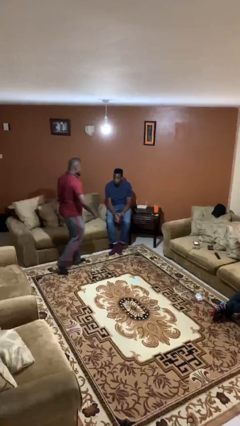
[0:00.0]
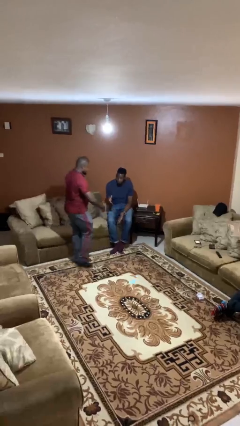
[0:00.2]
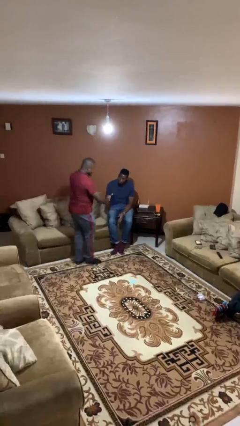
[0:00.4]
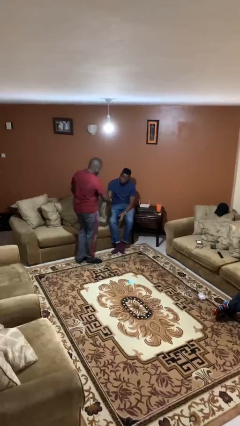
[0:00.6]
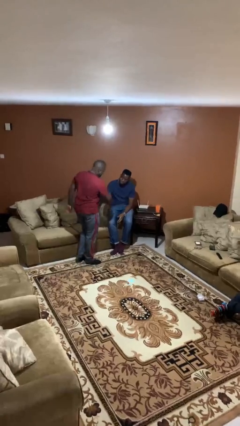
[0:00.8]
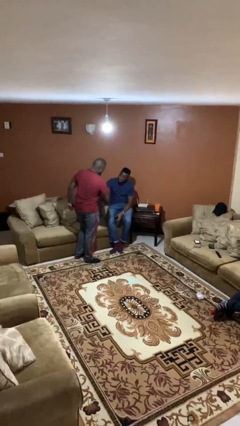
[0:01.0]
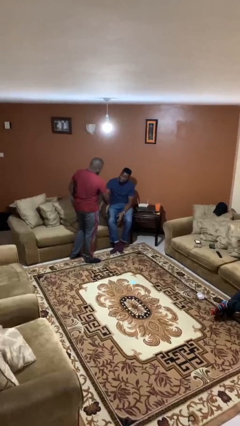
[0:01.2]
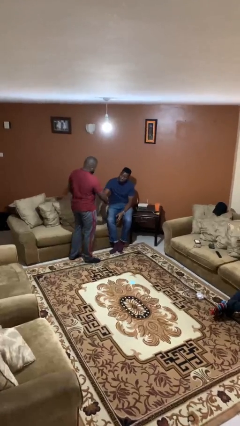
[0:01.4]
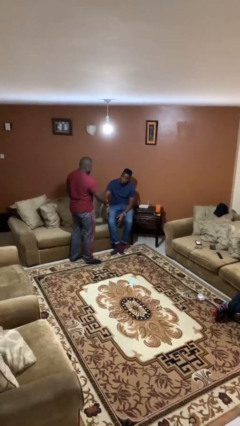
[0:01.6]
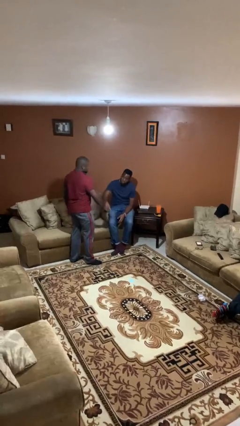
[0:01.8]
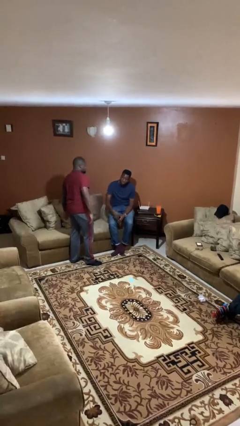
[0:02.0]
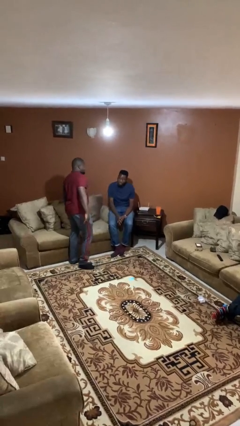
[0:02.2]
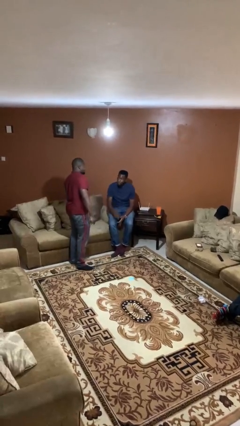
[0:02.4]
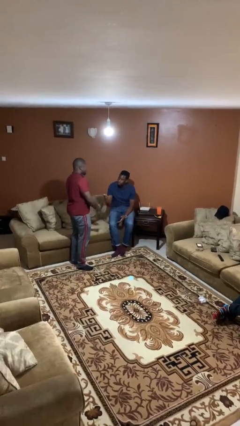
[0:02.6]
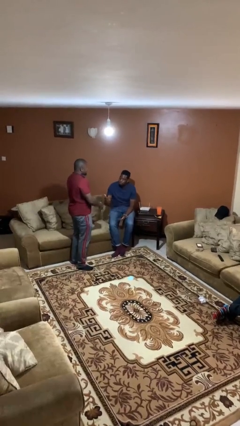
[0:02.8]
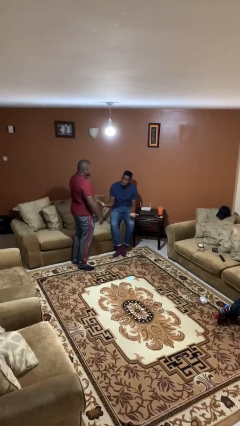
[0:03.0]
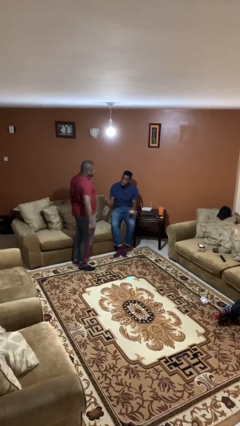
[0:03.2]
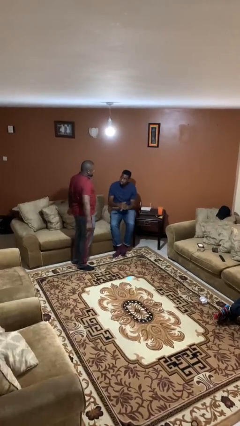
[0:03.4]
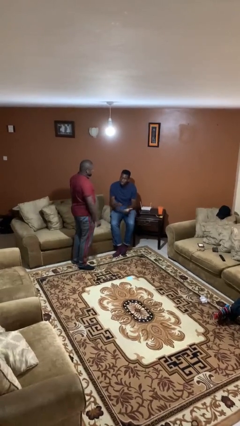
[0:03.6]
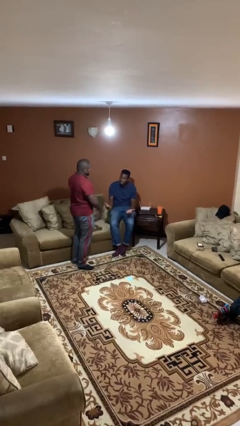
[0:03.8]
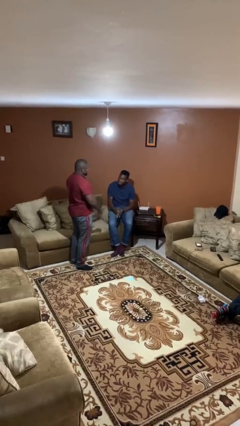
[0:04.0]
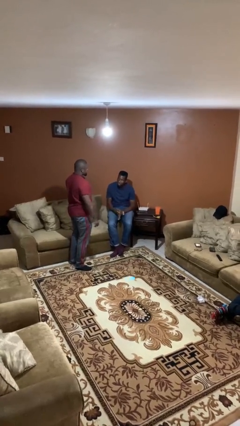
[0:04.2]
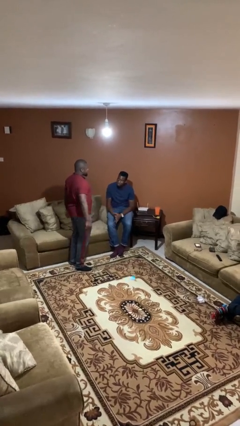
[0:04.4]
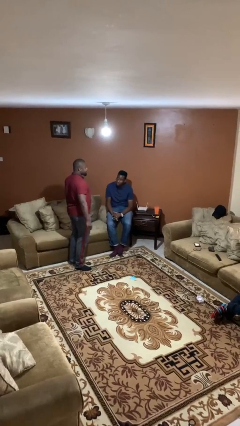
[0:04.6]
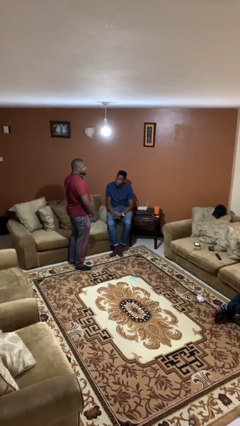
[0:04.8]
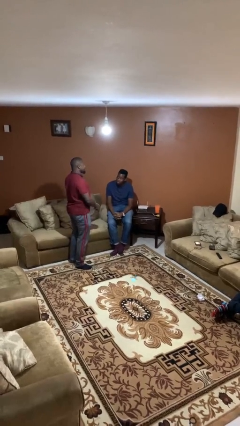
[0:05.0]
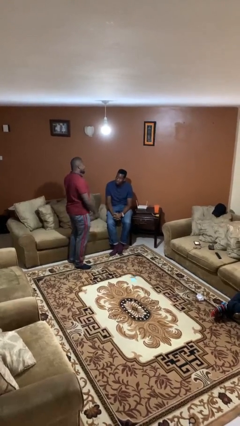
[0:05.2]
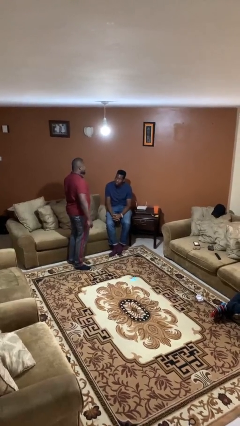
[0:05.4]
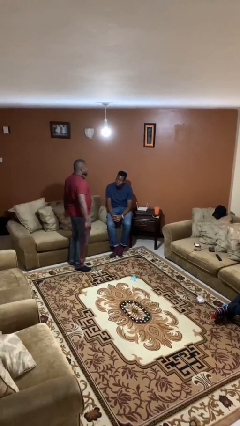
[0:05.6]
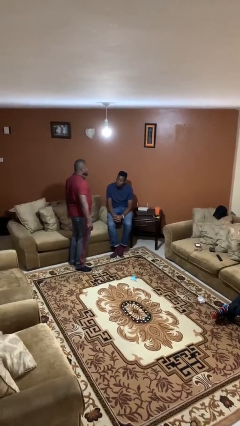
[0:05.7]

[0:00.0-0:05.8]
person shakes hand

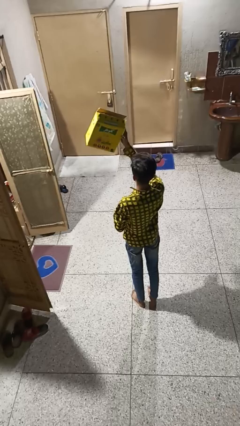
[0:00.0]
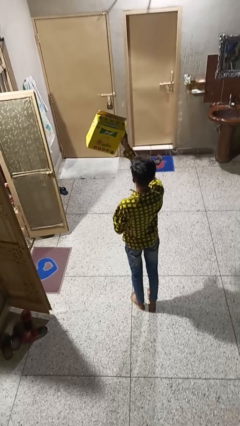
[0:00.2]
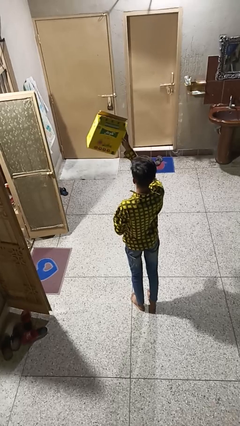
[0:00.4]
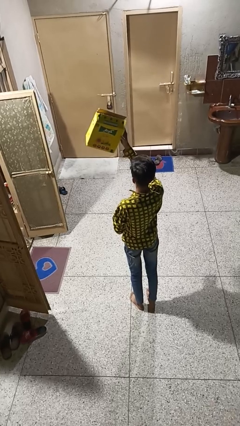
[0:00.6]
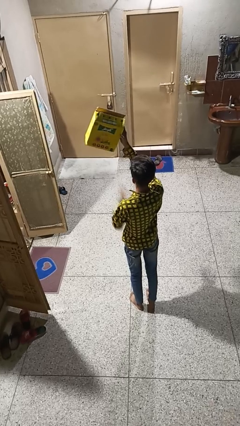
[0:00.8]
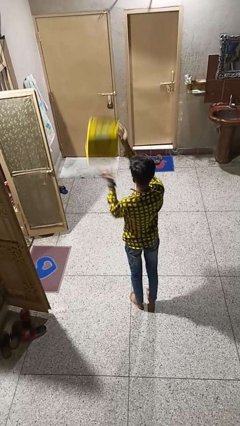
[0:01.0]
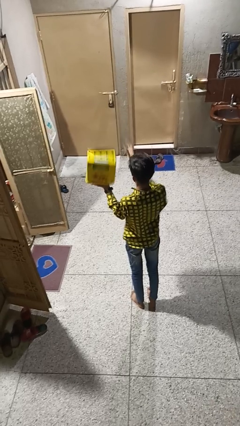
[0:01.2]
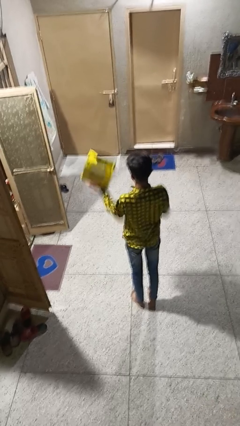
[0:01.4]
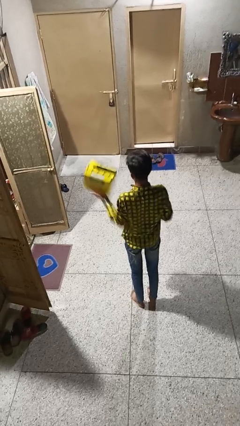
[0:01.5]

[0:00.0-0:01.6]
person drops object

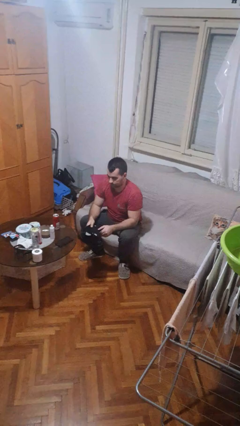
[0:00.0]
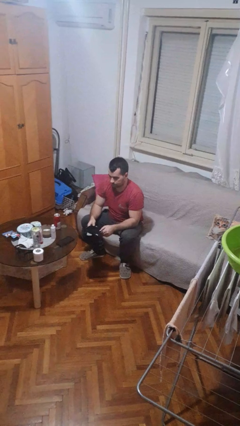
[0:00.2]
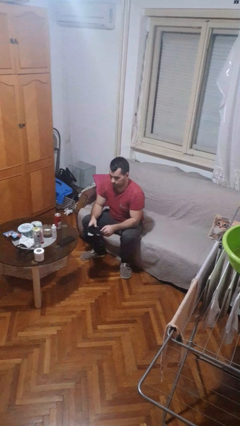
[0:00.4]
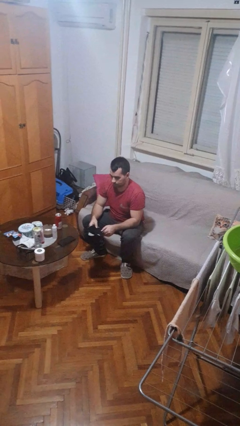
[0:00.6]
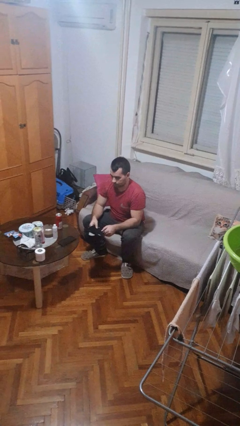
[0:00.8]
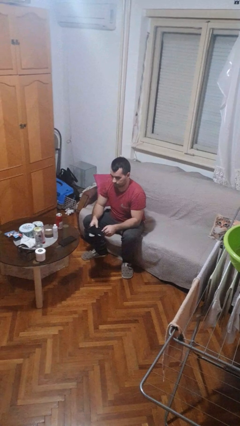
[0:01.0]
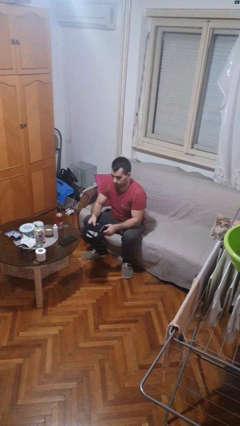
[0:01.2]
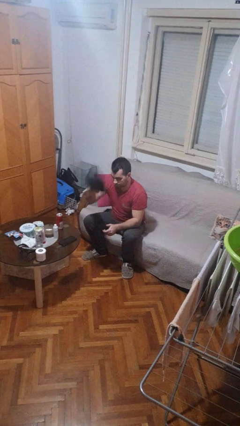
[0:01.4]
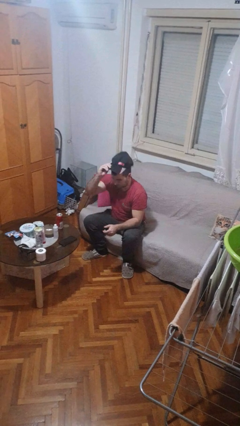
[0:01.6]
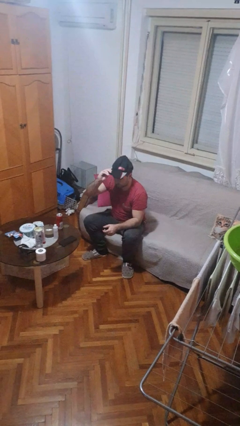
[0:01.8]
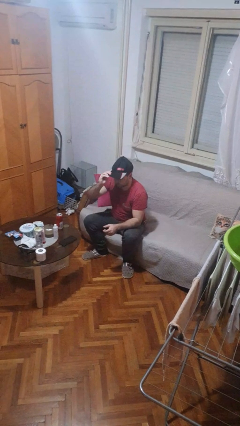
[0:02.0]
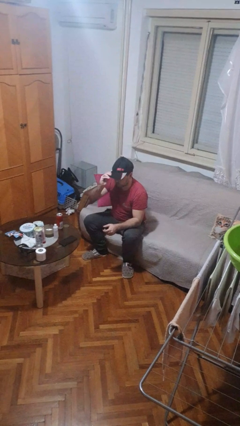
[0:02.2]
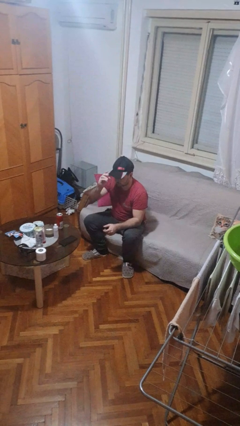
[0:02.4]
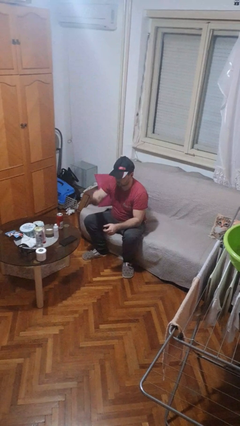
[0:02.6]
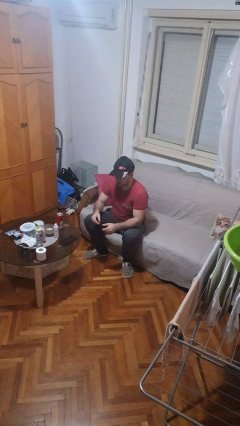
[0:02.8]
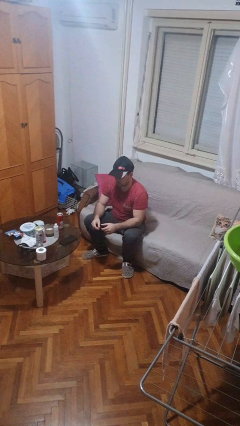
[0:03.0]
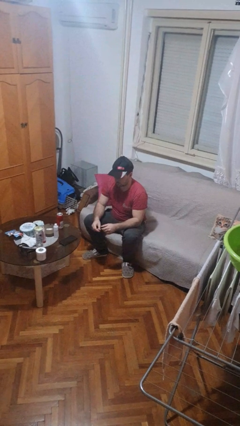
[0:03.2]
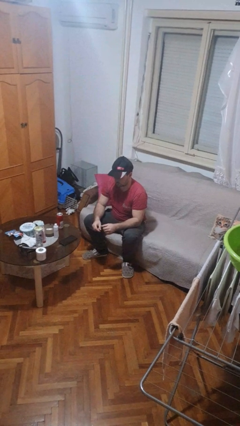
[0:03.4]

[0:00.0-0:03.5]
person puts on hat

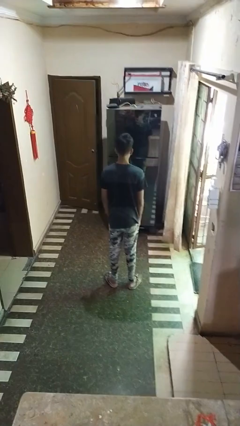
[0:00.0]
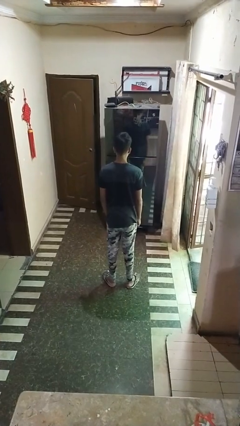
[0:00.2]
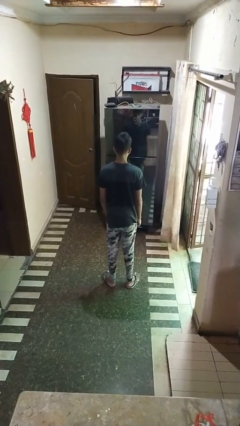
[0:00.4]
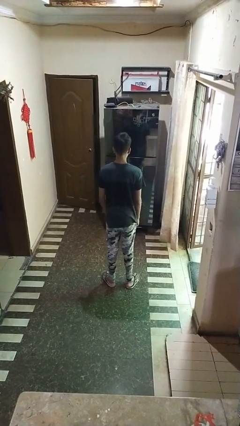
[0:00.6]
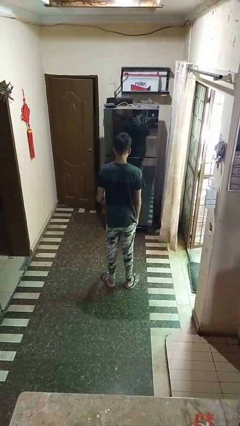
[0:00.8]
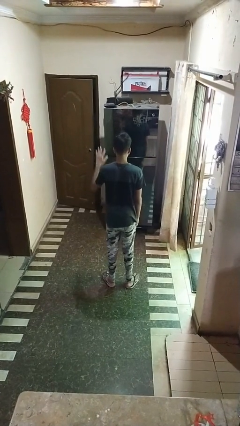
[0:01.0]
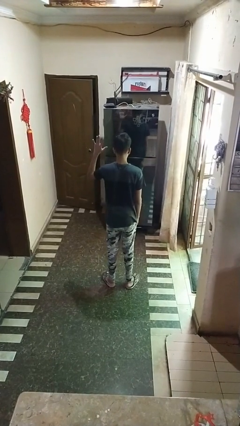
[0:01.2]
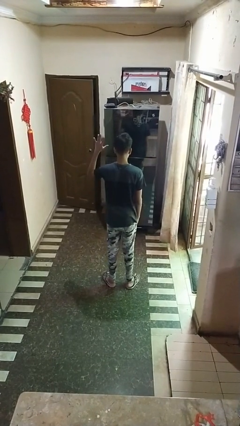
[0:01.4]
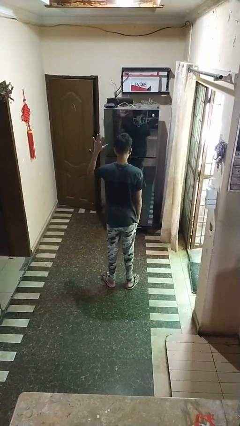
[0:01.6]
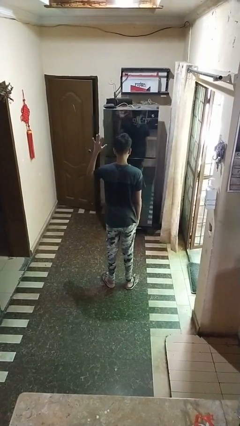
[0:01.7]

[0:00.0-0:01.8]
person gestures number five

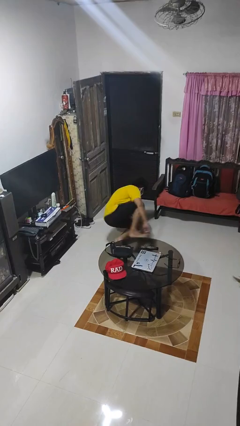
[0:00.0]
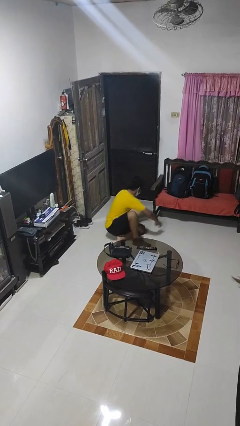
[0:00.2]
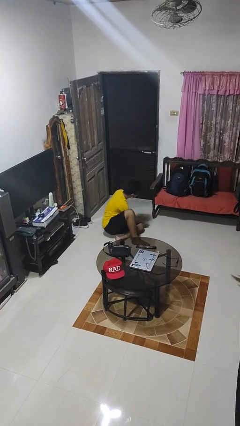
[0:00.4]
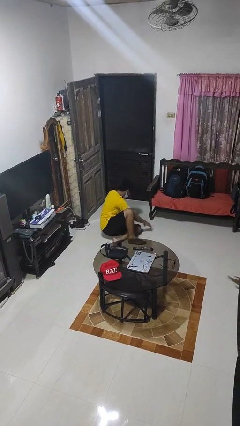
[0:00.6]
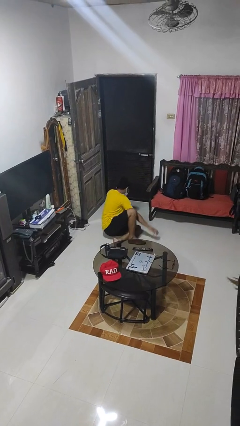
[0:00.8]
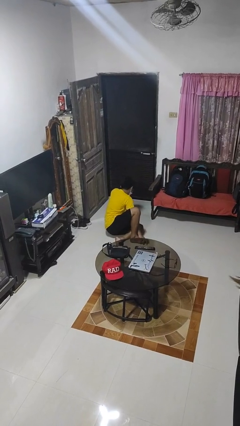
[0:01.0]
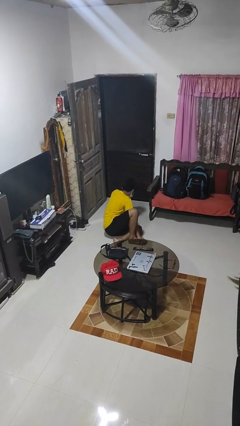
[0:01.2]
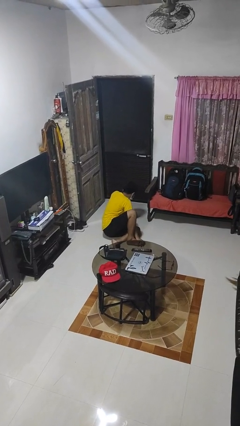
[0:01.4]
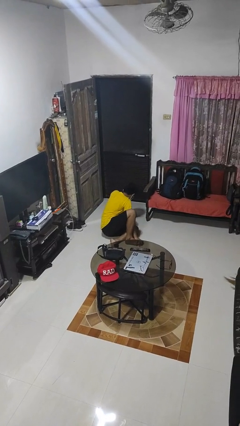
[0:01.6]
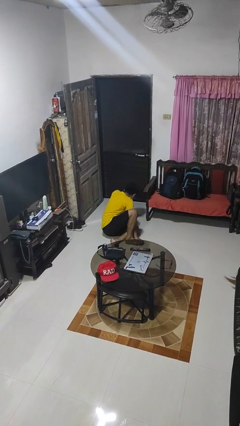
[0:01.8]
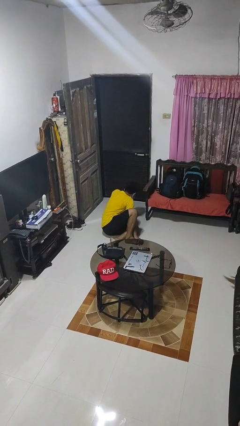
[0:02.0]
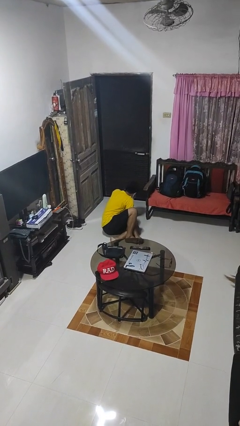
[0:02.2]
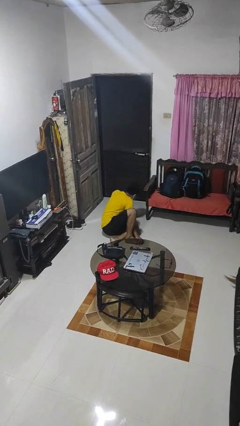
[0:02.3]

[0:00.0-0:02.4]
person lies down on floor

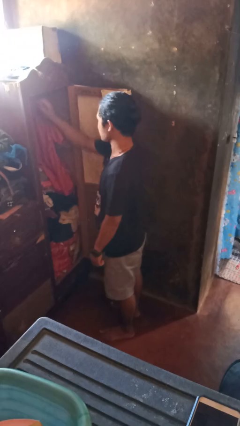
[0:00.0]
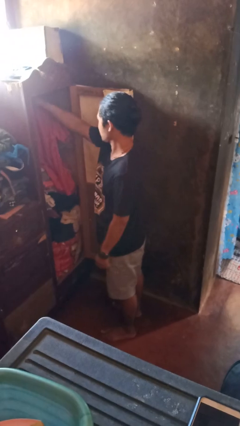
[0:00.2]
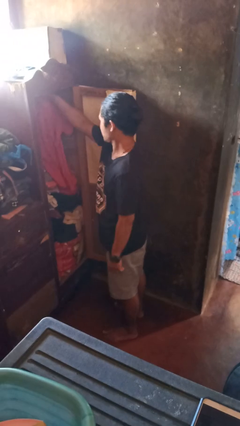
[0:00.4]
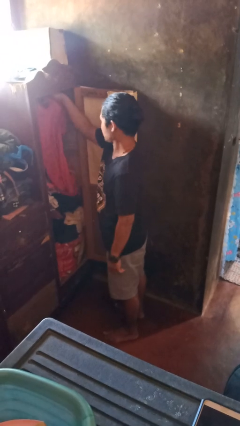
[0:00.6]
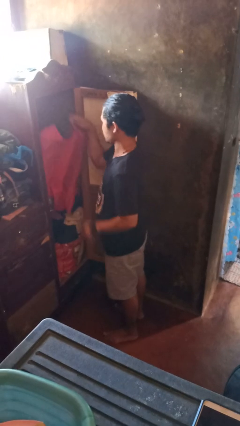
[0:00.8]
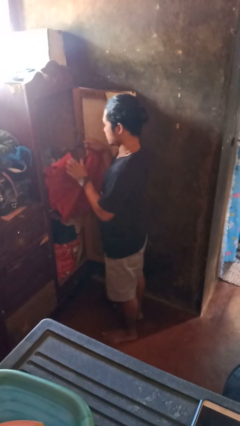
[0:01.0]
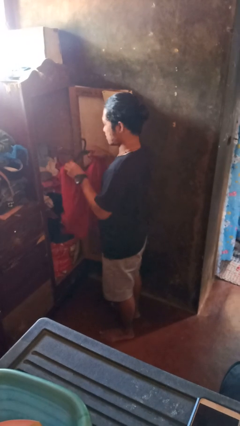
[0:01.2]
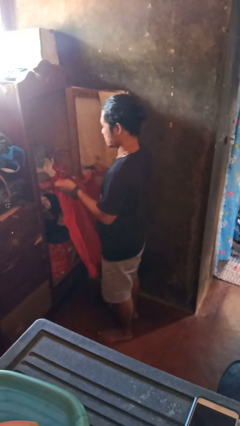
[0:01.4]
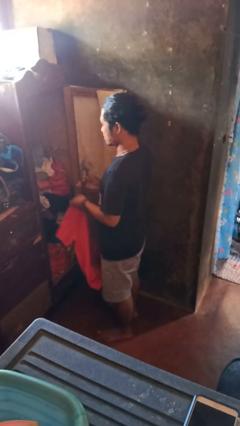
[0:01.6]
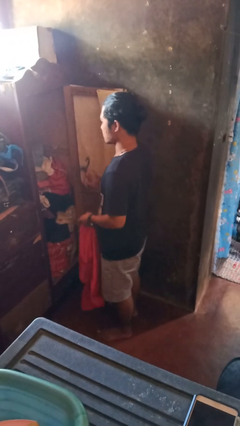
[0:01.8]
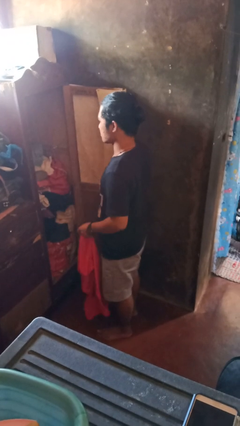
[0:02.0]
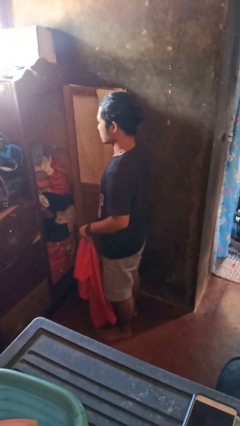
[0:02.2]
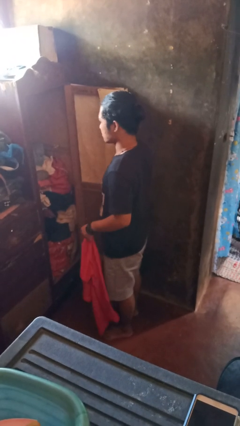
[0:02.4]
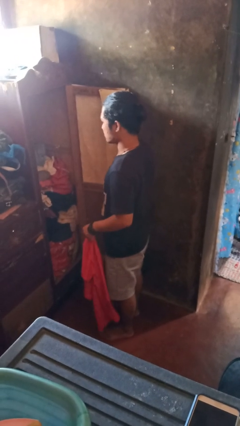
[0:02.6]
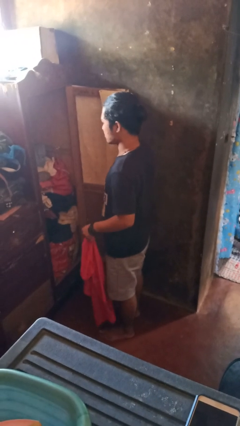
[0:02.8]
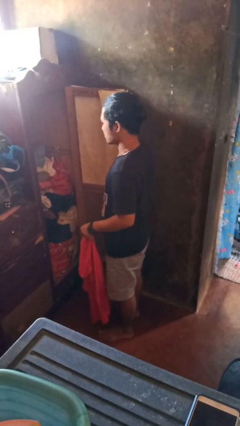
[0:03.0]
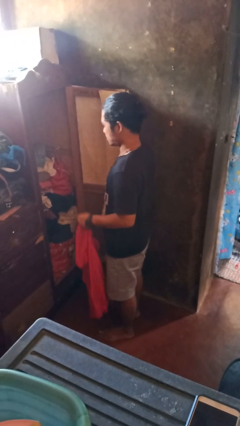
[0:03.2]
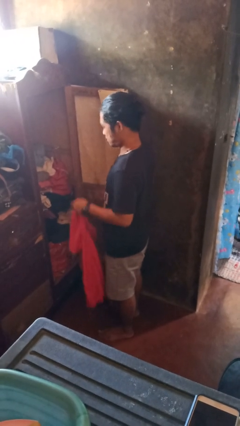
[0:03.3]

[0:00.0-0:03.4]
person takes clothes from closet
